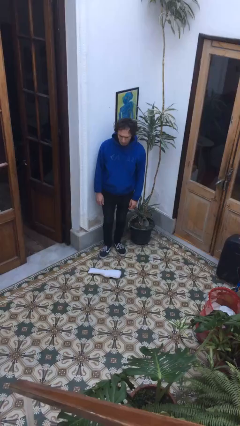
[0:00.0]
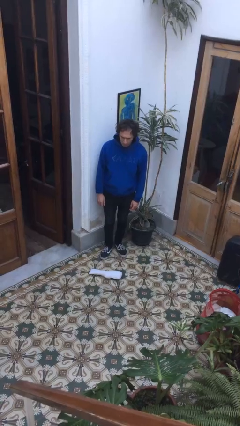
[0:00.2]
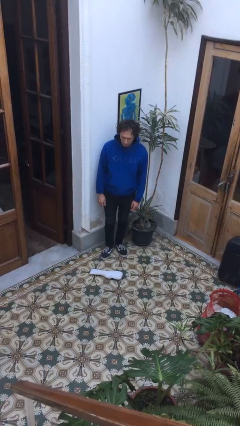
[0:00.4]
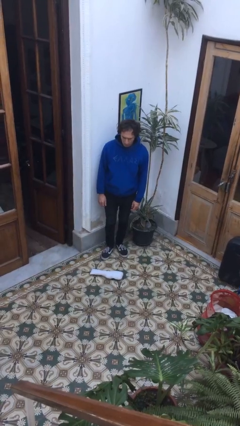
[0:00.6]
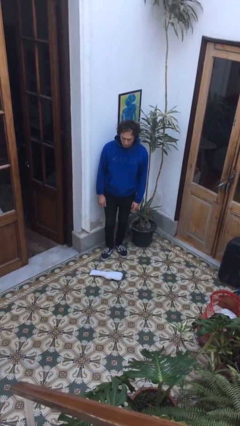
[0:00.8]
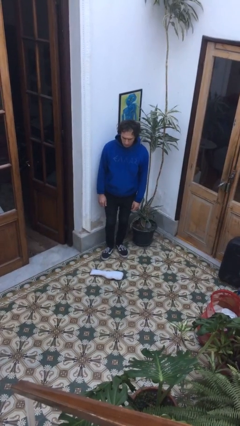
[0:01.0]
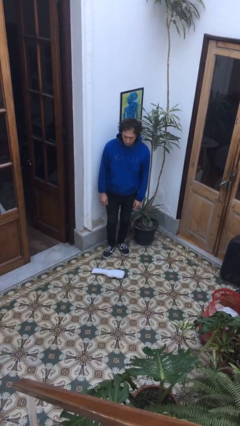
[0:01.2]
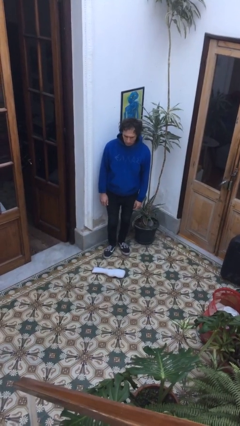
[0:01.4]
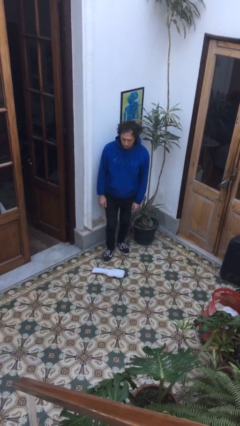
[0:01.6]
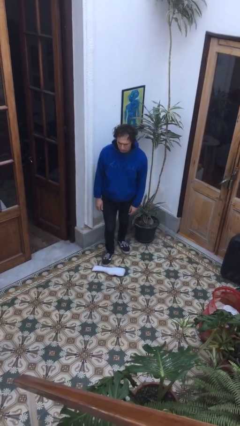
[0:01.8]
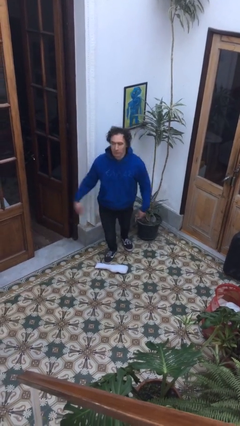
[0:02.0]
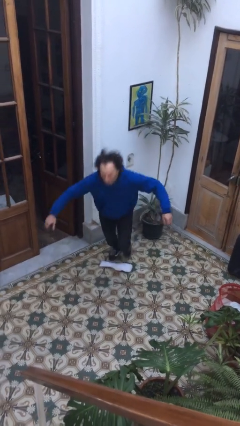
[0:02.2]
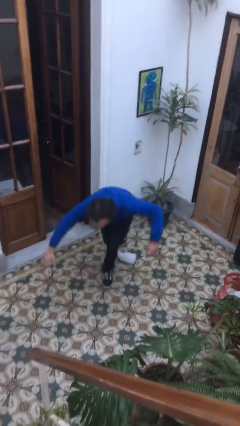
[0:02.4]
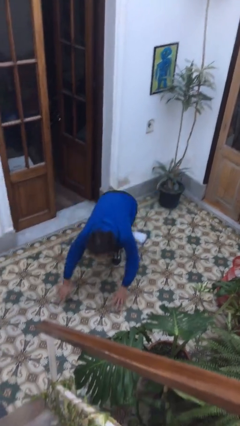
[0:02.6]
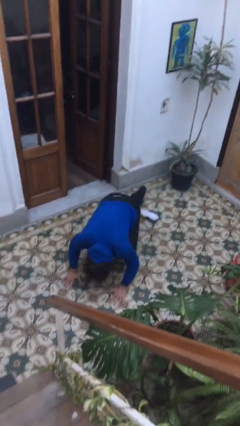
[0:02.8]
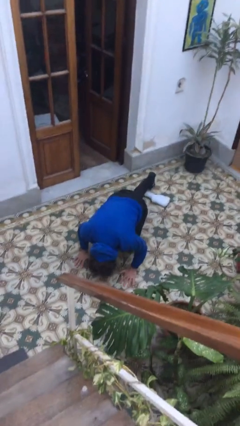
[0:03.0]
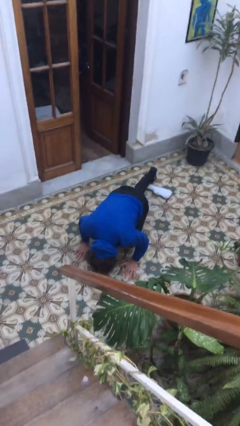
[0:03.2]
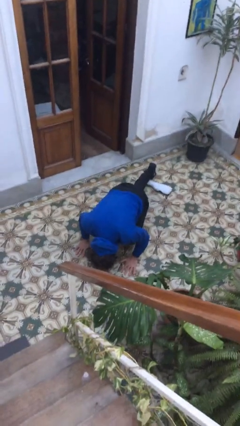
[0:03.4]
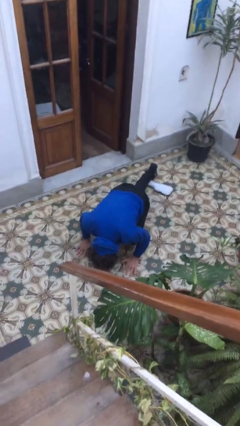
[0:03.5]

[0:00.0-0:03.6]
person trips on object on floor

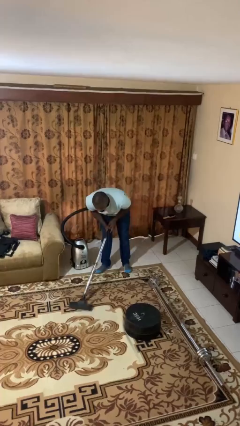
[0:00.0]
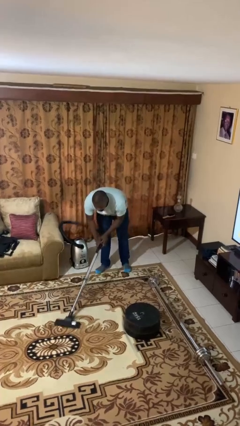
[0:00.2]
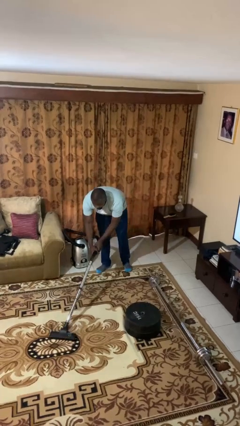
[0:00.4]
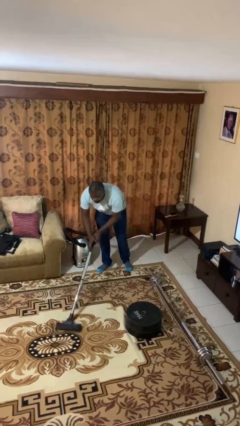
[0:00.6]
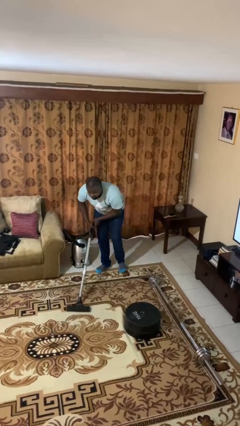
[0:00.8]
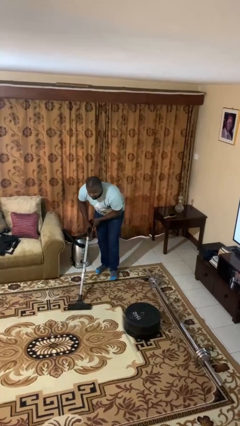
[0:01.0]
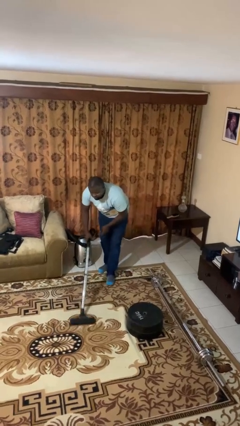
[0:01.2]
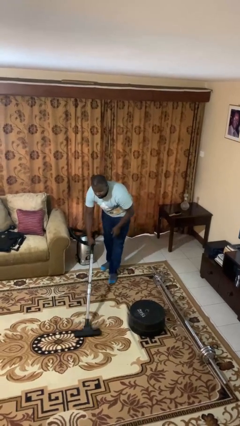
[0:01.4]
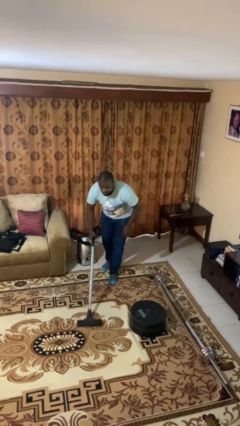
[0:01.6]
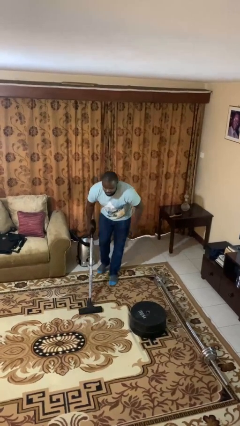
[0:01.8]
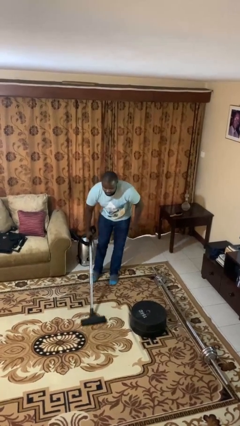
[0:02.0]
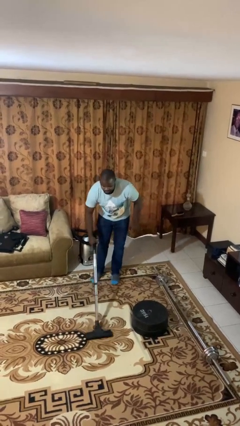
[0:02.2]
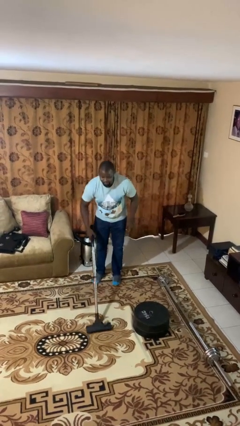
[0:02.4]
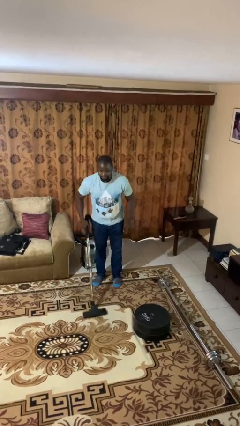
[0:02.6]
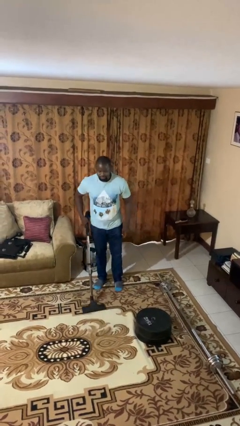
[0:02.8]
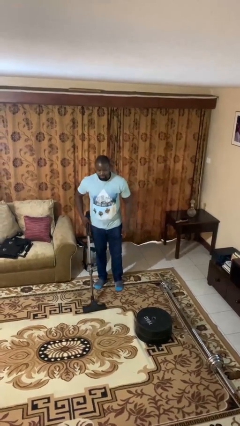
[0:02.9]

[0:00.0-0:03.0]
person vacuums carpet

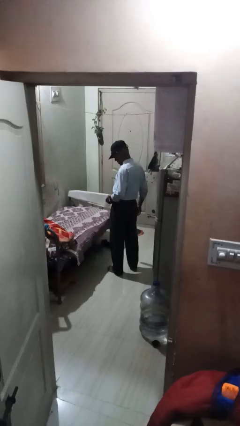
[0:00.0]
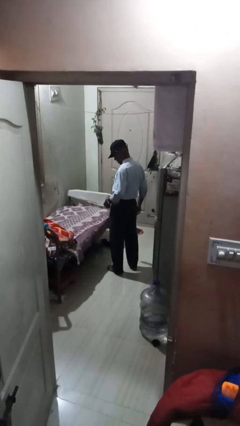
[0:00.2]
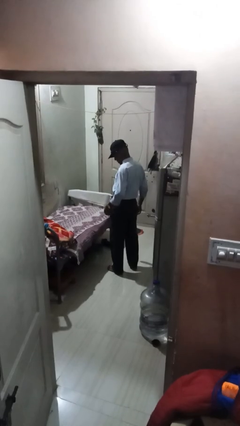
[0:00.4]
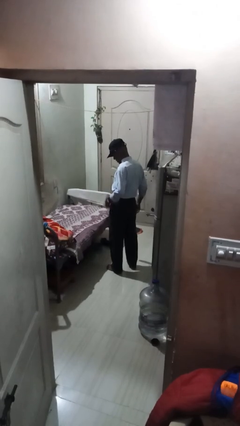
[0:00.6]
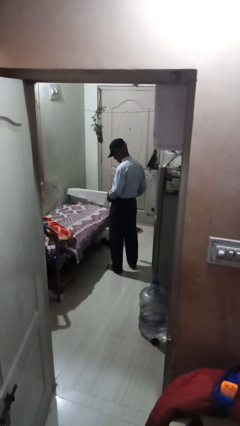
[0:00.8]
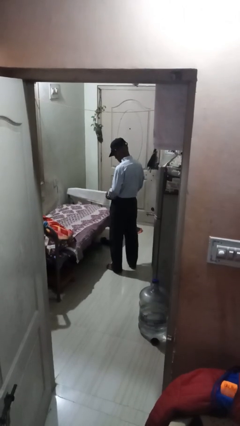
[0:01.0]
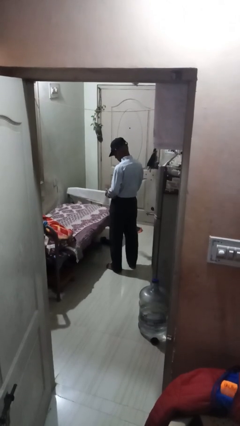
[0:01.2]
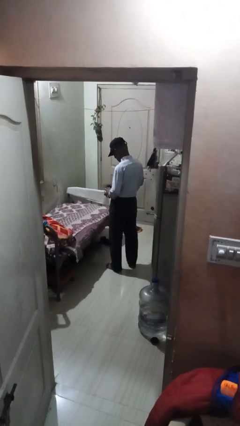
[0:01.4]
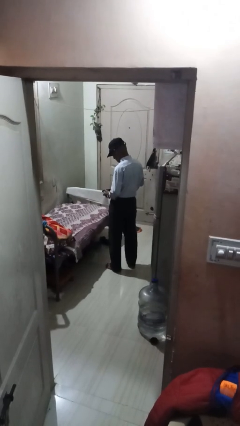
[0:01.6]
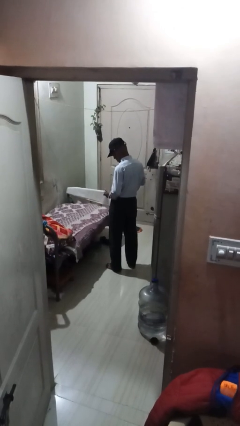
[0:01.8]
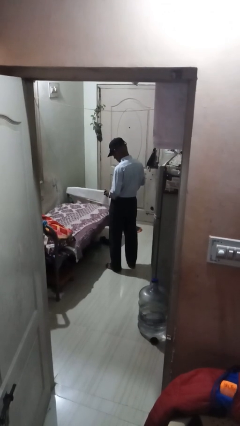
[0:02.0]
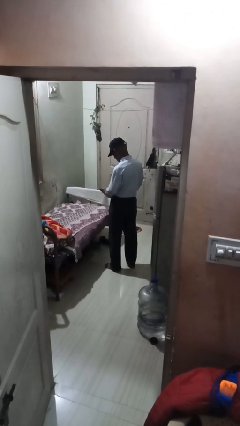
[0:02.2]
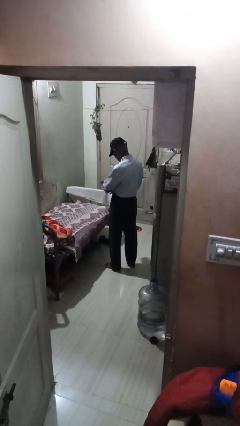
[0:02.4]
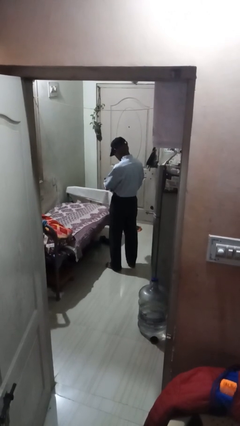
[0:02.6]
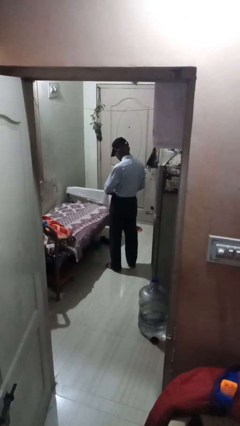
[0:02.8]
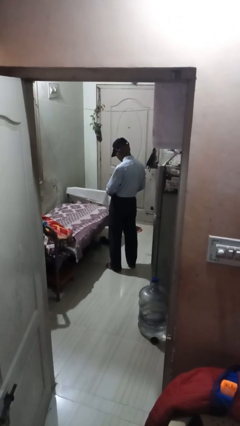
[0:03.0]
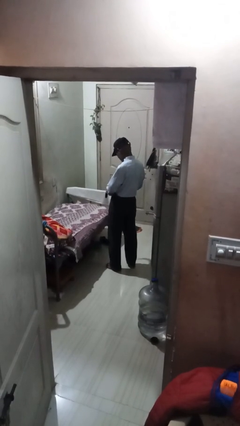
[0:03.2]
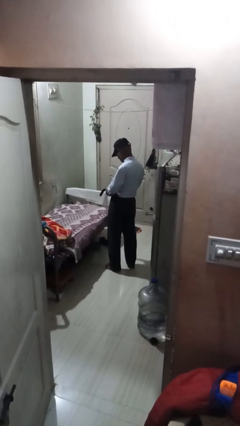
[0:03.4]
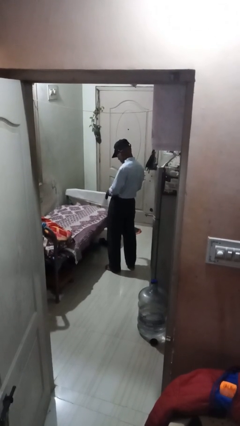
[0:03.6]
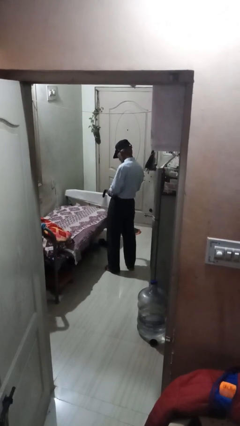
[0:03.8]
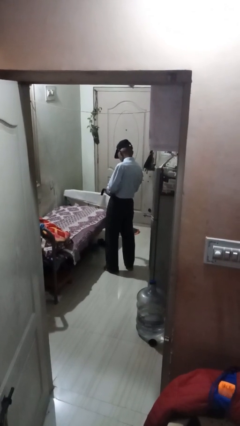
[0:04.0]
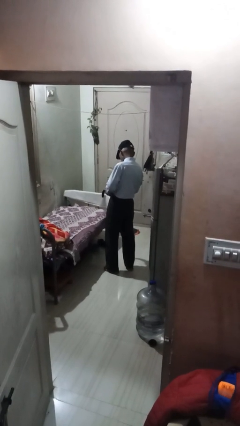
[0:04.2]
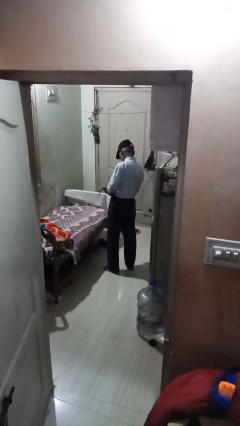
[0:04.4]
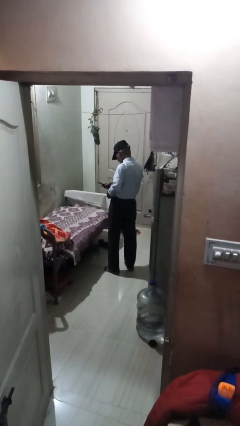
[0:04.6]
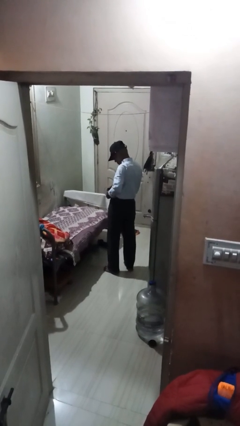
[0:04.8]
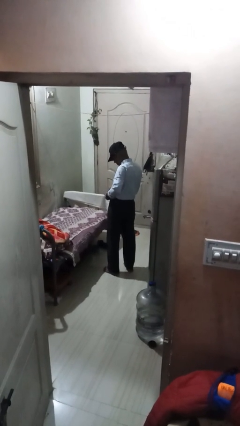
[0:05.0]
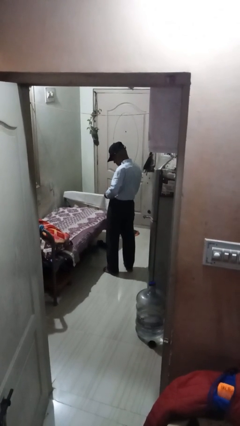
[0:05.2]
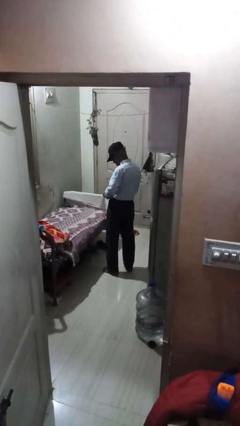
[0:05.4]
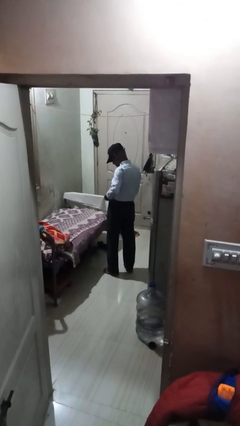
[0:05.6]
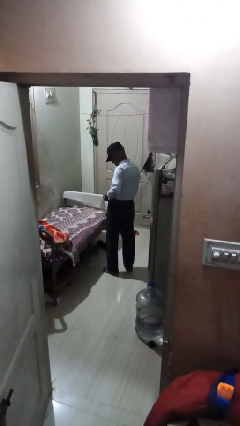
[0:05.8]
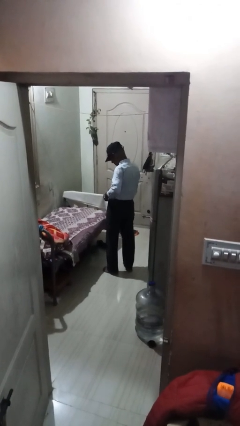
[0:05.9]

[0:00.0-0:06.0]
person puts on belt

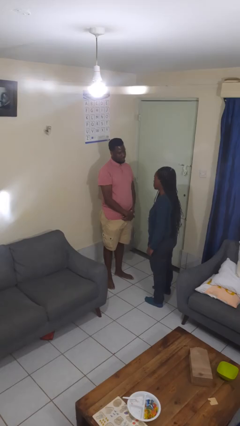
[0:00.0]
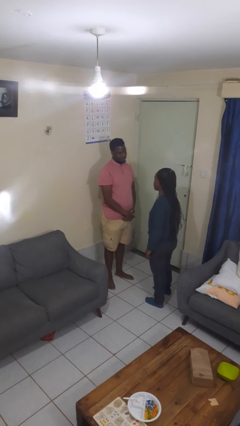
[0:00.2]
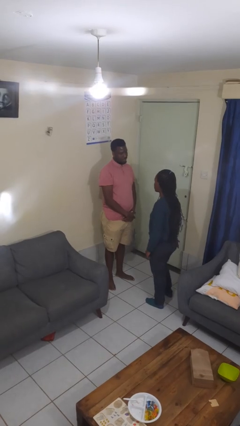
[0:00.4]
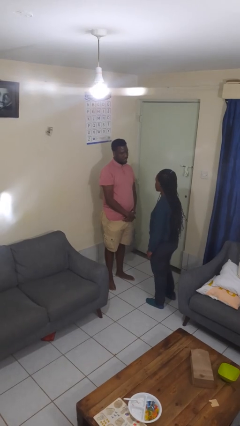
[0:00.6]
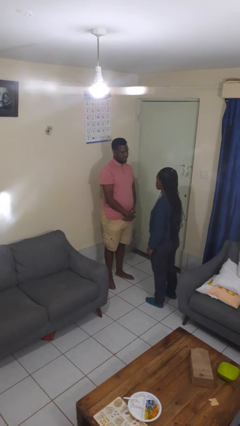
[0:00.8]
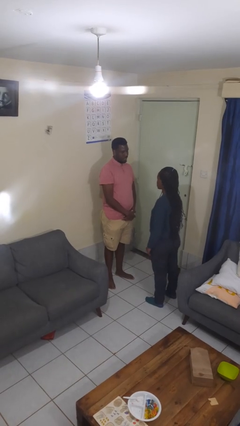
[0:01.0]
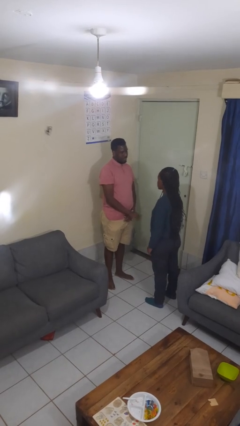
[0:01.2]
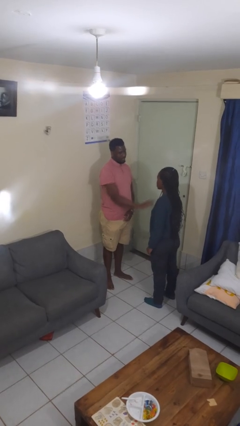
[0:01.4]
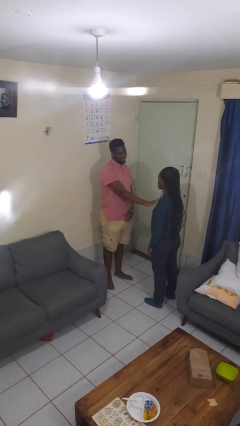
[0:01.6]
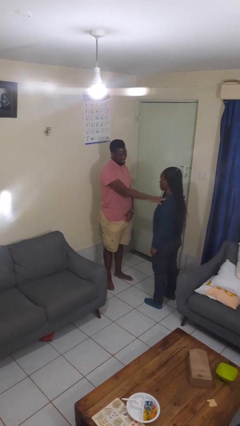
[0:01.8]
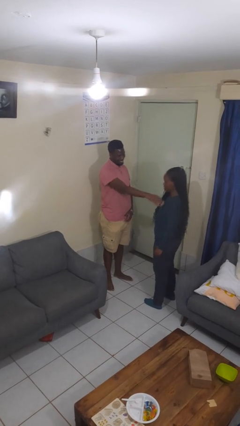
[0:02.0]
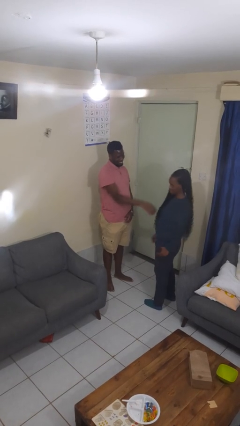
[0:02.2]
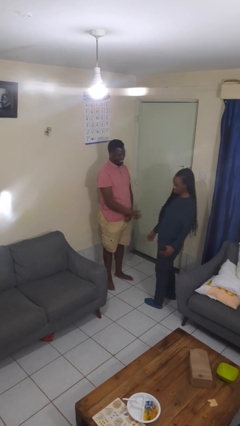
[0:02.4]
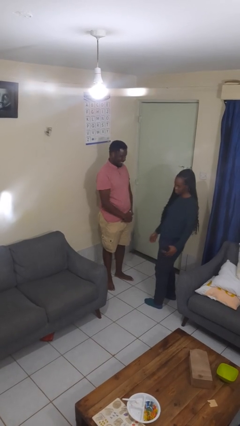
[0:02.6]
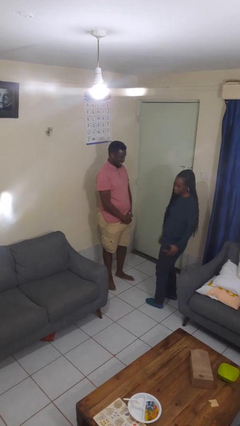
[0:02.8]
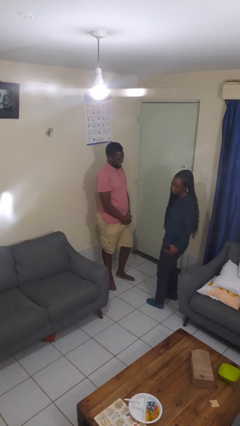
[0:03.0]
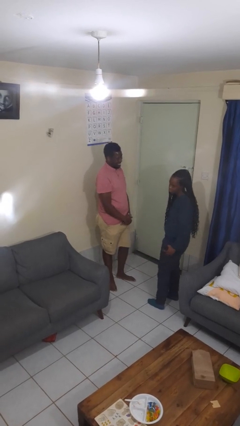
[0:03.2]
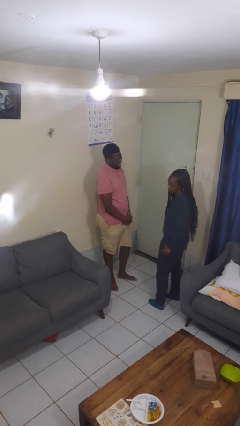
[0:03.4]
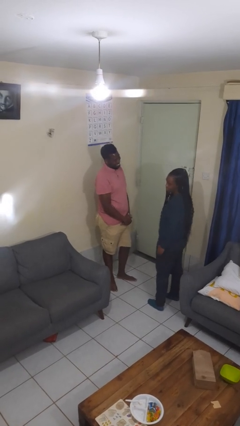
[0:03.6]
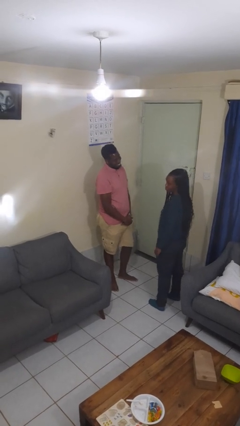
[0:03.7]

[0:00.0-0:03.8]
person shoves person

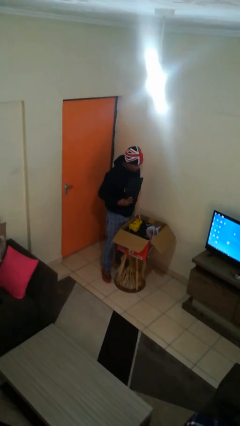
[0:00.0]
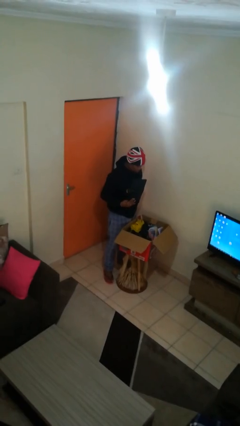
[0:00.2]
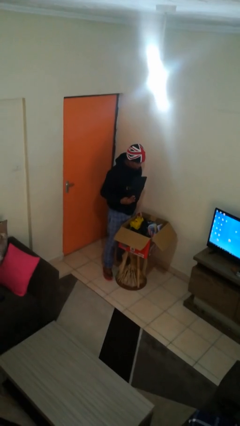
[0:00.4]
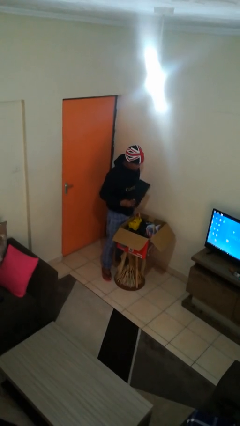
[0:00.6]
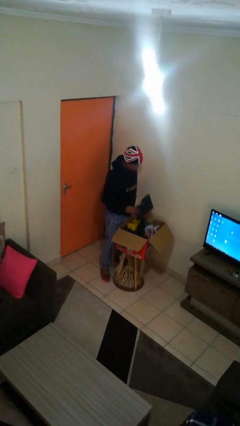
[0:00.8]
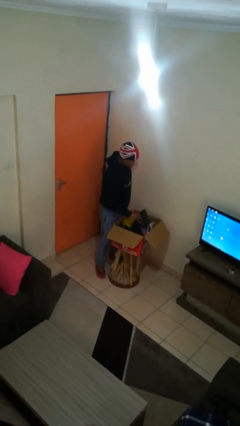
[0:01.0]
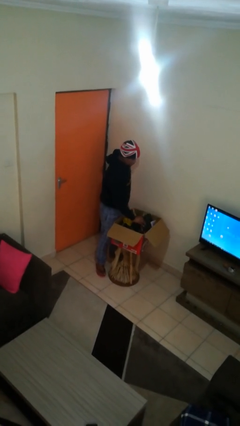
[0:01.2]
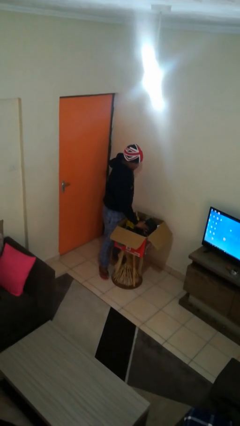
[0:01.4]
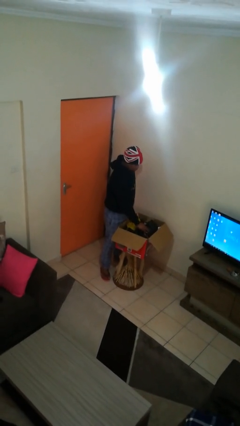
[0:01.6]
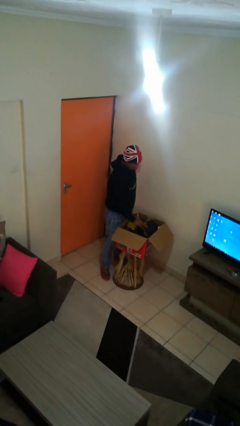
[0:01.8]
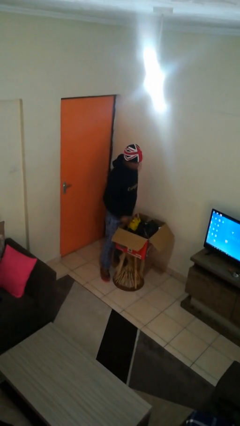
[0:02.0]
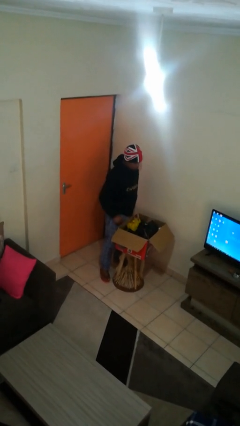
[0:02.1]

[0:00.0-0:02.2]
person puts object into box
